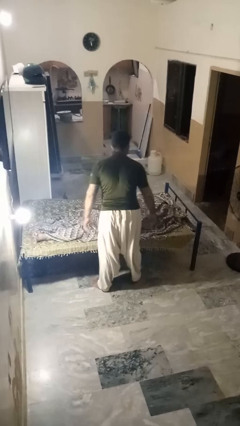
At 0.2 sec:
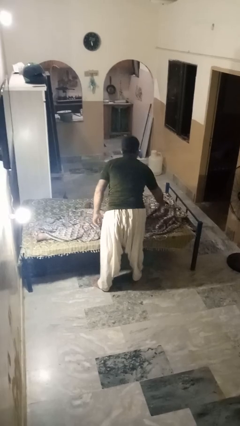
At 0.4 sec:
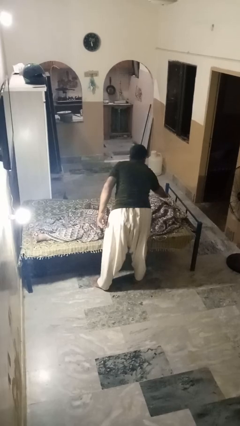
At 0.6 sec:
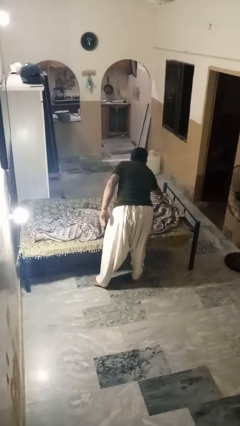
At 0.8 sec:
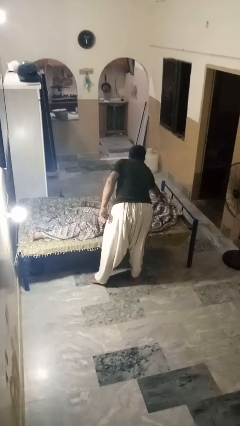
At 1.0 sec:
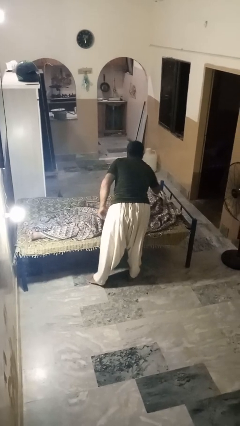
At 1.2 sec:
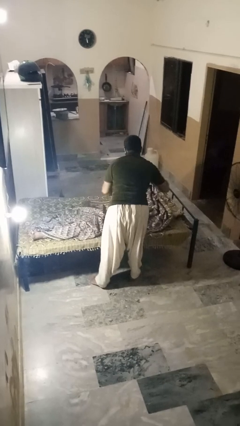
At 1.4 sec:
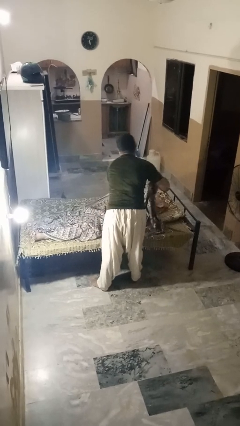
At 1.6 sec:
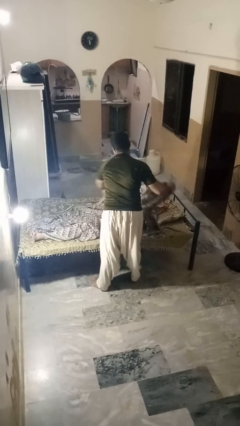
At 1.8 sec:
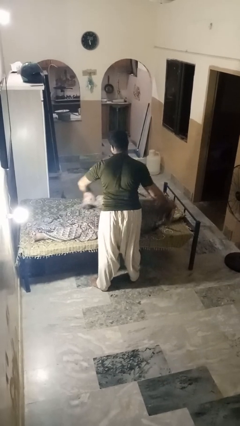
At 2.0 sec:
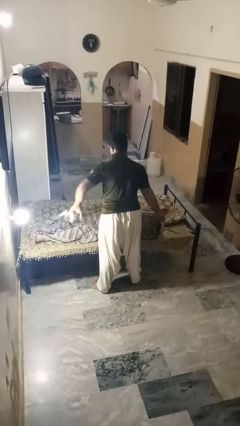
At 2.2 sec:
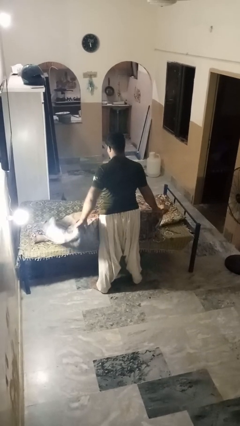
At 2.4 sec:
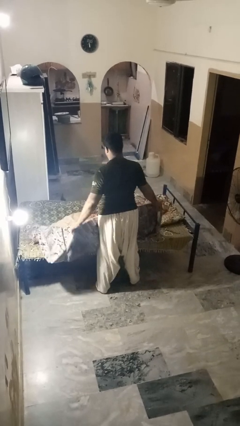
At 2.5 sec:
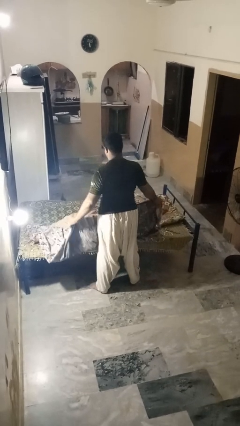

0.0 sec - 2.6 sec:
person uncovers friend with blanket

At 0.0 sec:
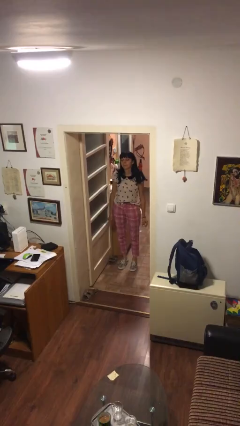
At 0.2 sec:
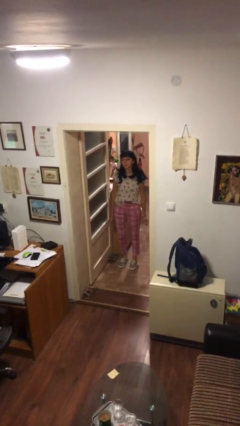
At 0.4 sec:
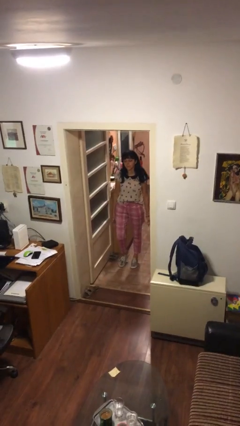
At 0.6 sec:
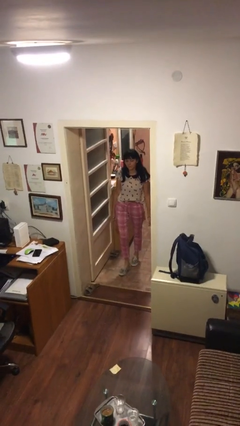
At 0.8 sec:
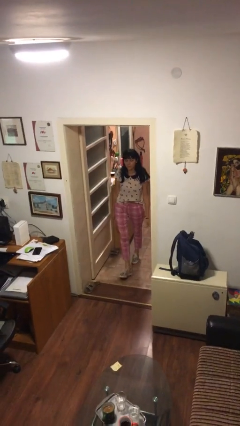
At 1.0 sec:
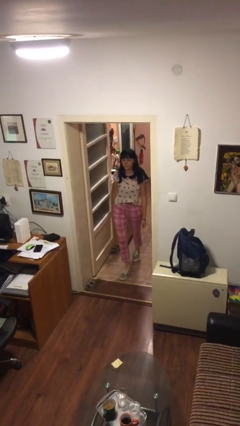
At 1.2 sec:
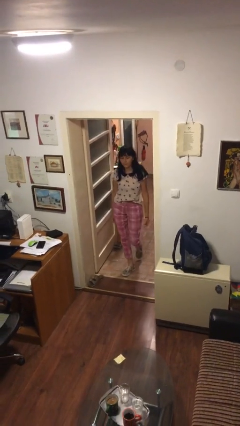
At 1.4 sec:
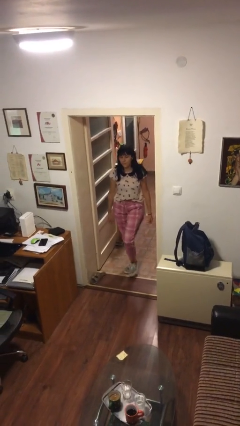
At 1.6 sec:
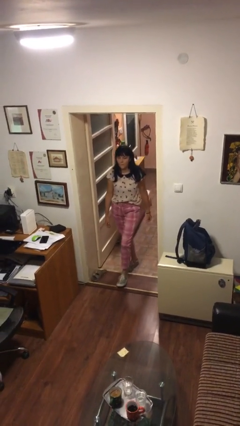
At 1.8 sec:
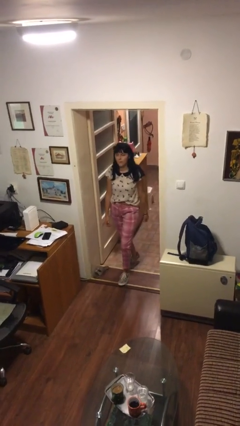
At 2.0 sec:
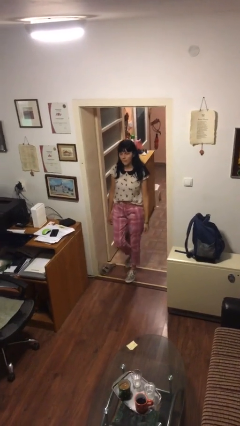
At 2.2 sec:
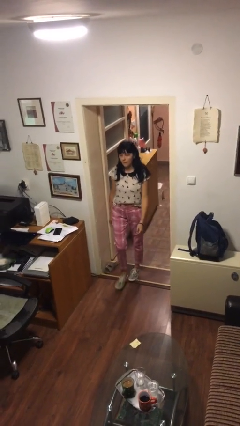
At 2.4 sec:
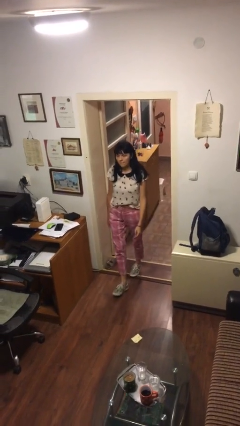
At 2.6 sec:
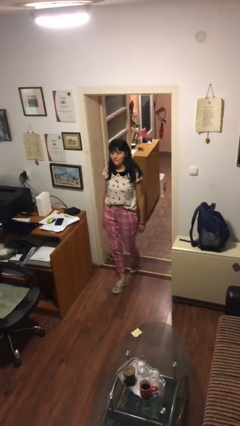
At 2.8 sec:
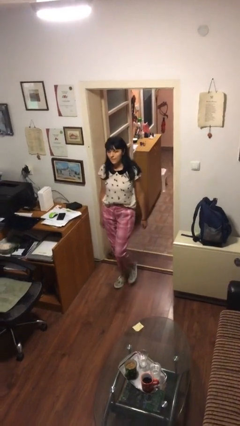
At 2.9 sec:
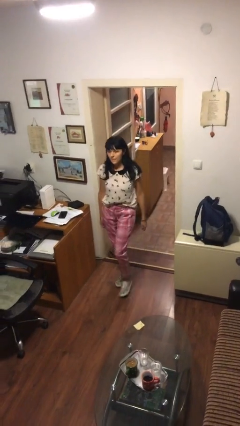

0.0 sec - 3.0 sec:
person enters scene through structure

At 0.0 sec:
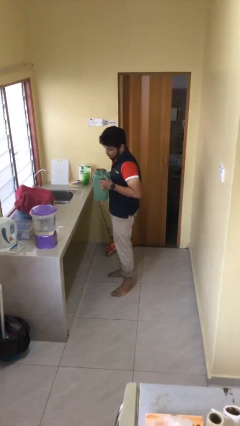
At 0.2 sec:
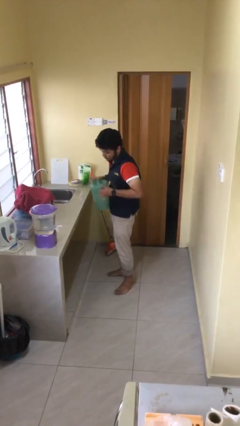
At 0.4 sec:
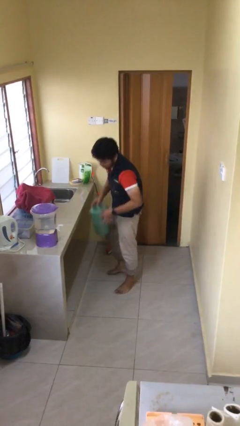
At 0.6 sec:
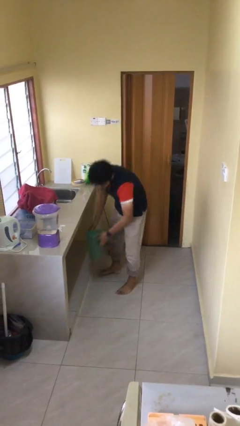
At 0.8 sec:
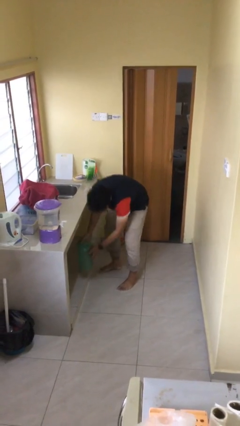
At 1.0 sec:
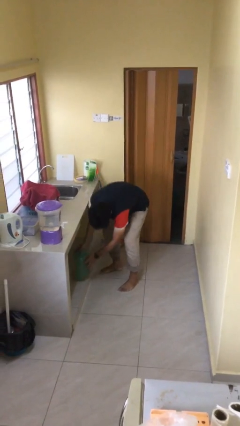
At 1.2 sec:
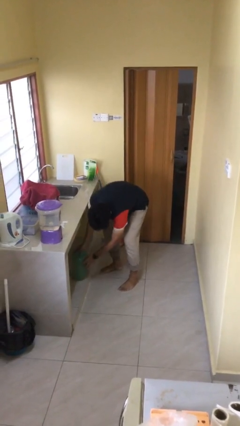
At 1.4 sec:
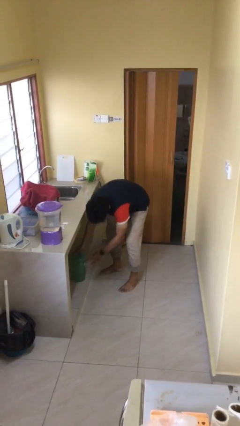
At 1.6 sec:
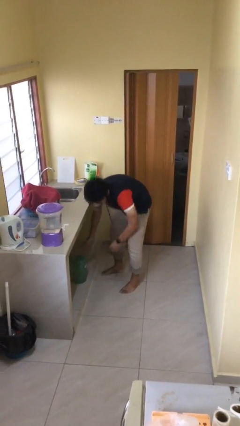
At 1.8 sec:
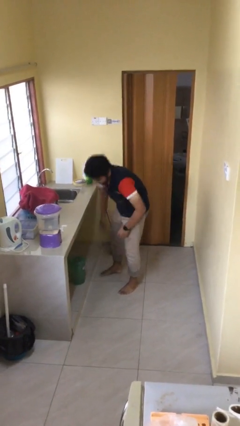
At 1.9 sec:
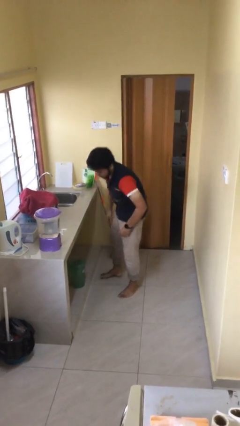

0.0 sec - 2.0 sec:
person puts down object into cabinet

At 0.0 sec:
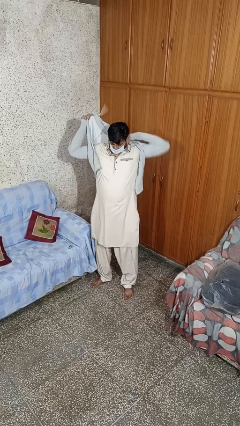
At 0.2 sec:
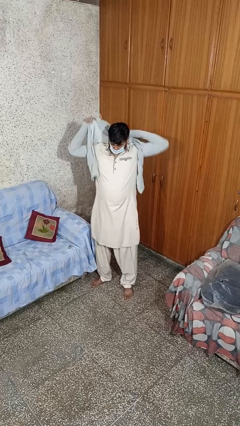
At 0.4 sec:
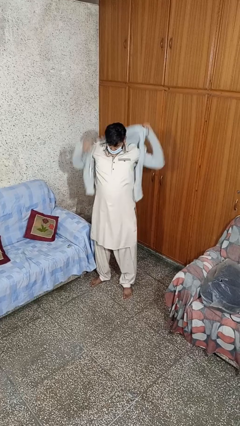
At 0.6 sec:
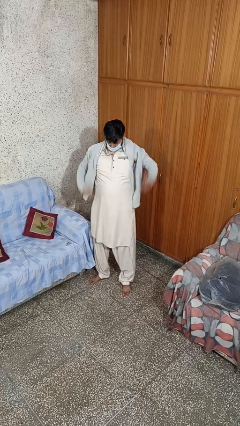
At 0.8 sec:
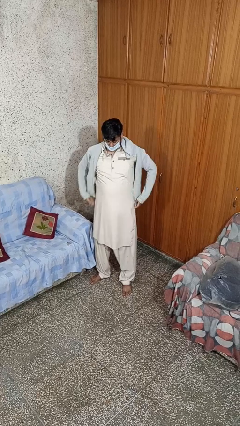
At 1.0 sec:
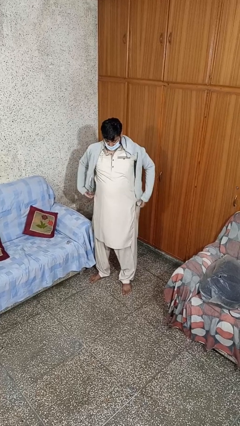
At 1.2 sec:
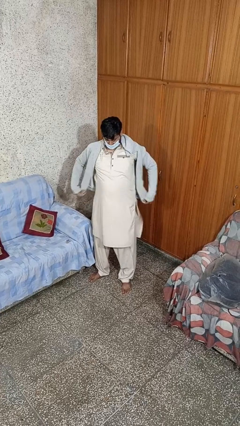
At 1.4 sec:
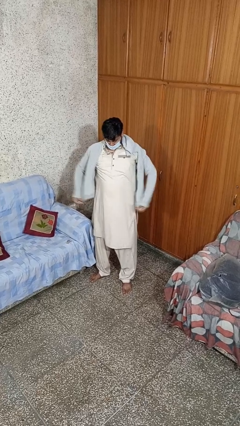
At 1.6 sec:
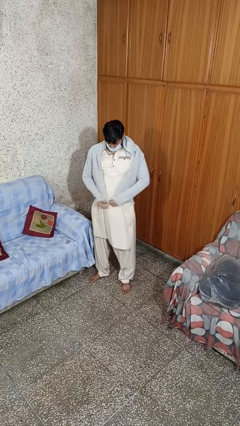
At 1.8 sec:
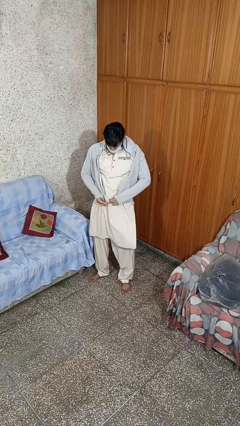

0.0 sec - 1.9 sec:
person zips up jacket

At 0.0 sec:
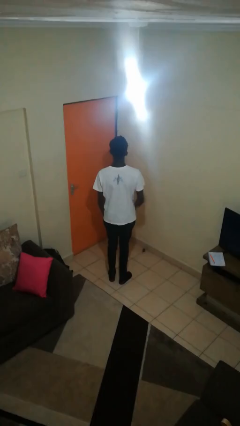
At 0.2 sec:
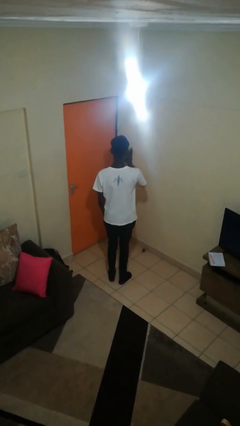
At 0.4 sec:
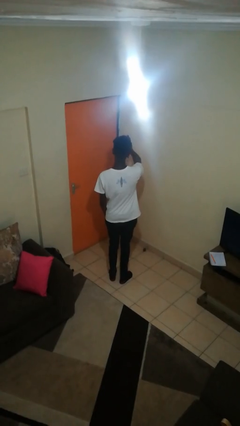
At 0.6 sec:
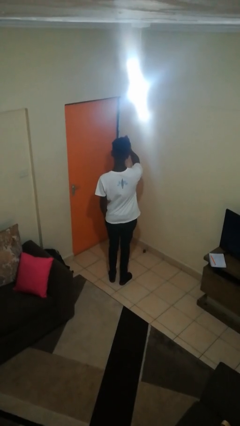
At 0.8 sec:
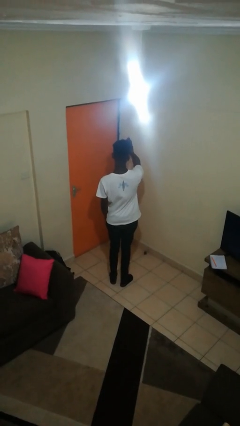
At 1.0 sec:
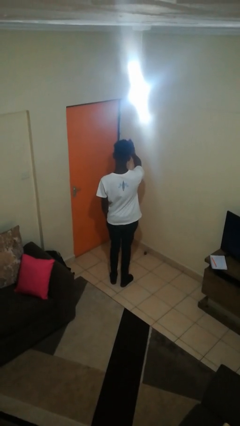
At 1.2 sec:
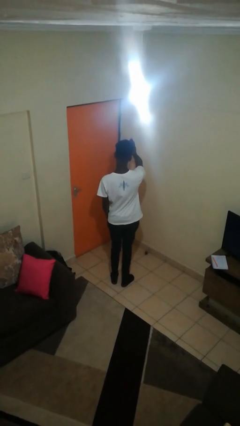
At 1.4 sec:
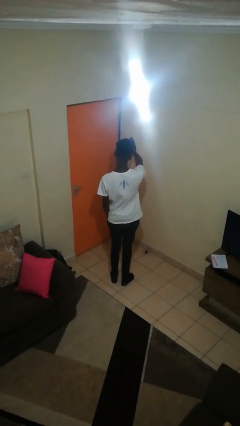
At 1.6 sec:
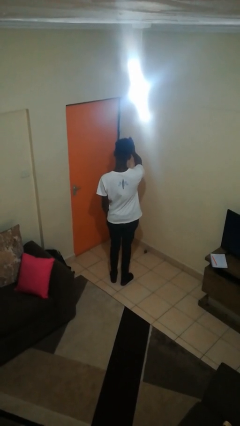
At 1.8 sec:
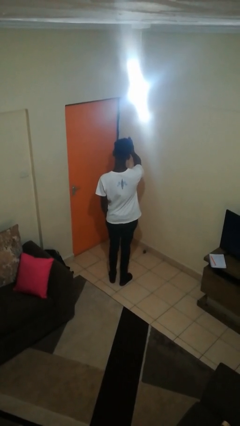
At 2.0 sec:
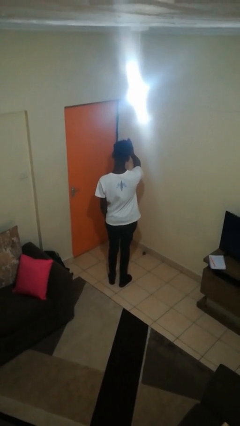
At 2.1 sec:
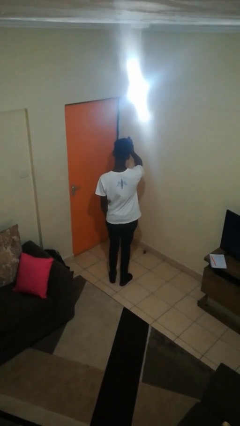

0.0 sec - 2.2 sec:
person gestures stop

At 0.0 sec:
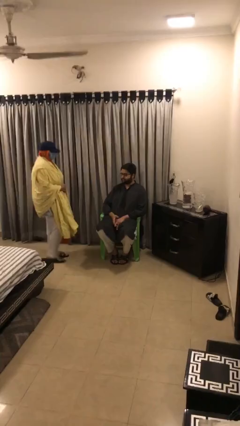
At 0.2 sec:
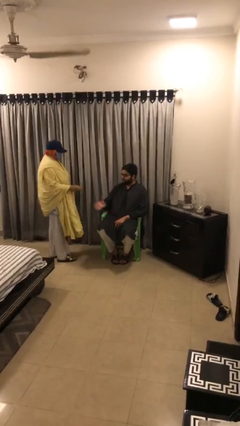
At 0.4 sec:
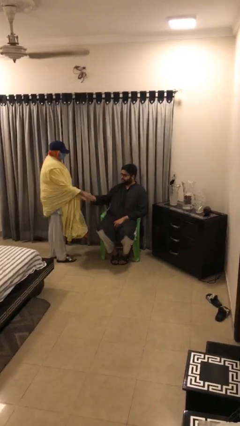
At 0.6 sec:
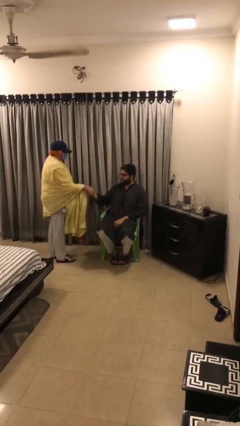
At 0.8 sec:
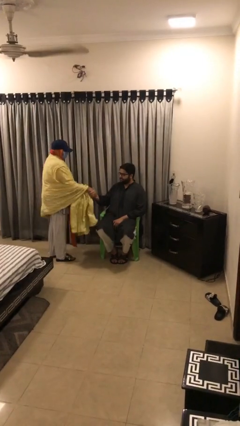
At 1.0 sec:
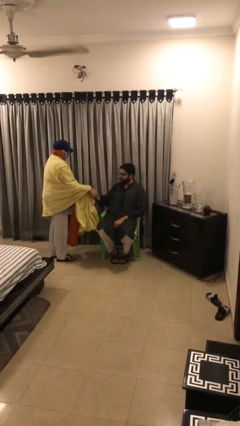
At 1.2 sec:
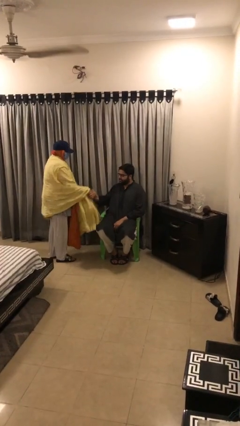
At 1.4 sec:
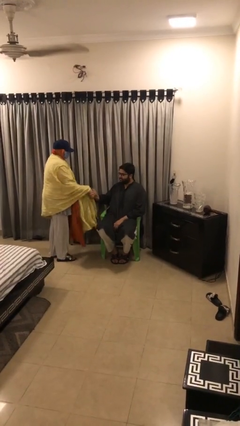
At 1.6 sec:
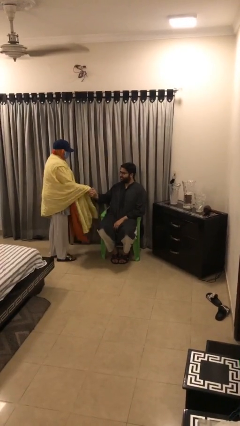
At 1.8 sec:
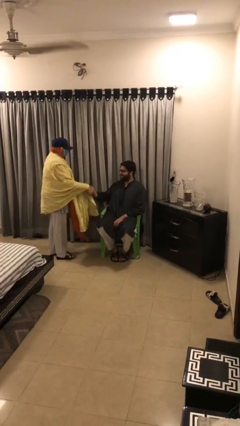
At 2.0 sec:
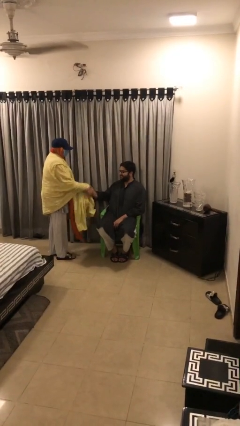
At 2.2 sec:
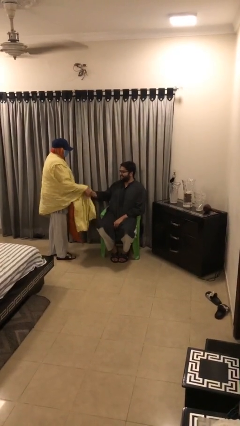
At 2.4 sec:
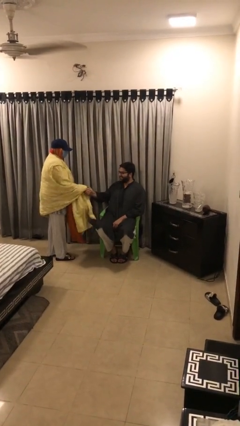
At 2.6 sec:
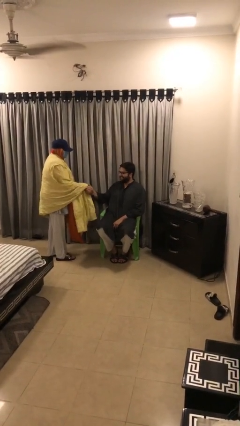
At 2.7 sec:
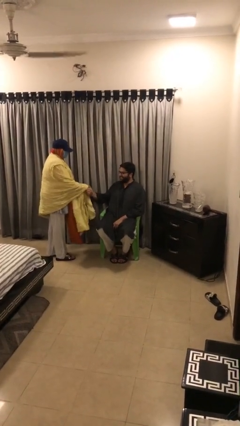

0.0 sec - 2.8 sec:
person shakes hand

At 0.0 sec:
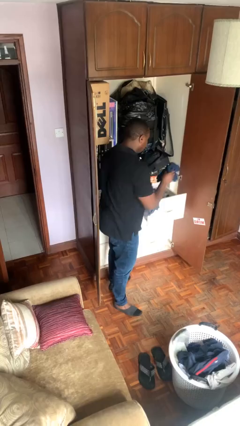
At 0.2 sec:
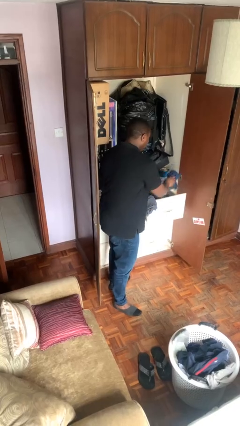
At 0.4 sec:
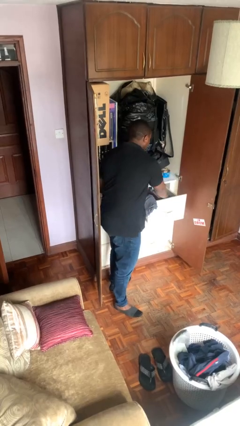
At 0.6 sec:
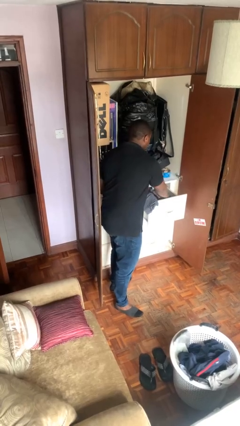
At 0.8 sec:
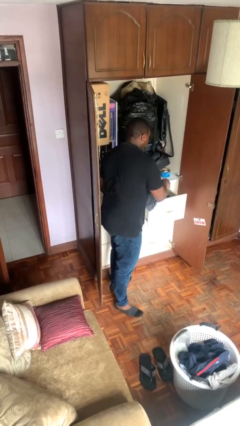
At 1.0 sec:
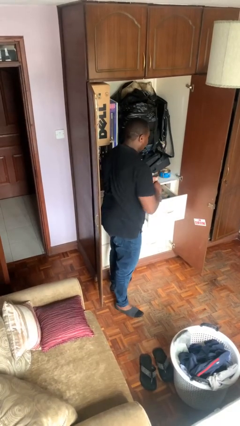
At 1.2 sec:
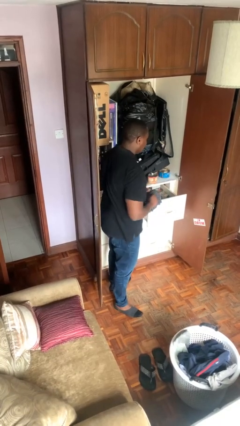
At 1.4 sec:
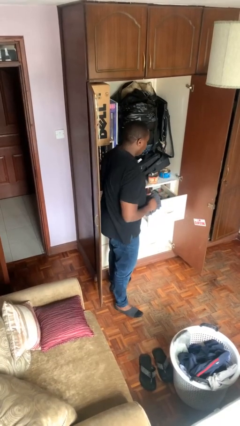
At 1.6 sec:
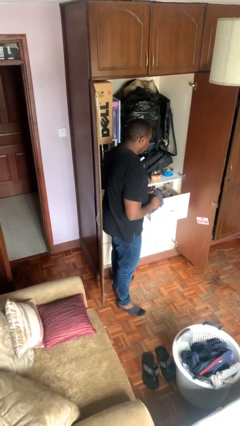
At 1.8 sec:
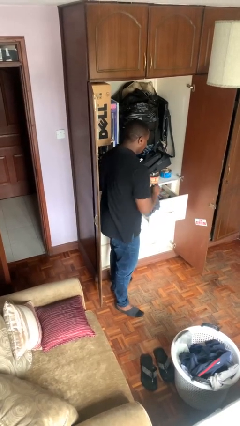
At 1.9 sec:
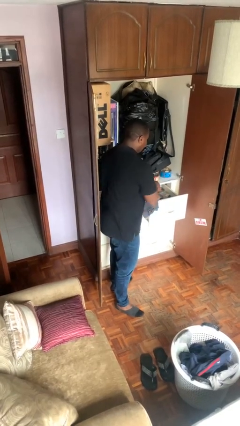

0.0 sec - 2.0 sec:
person puts clothes into dresser

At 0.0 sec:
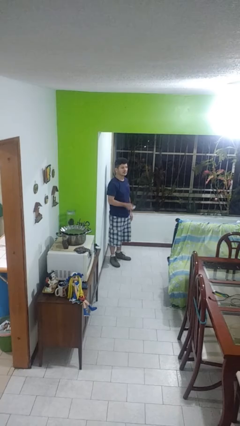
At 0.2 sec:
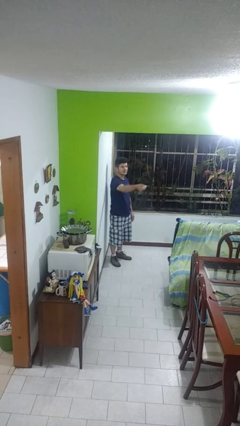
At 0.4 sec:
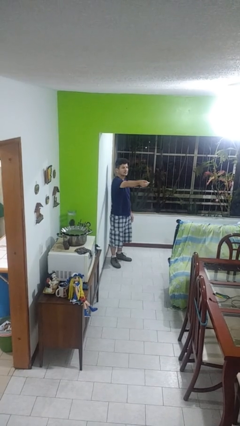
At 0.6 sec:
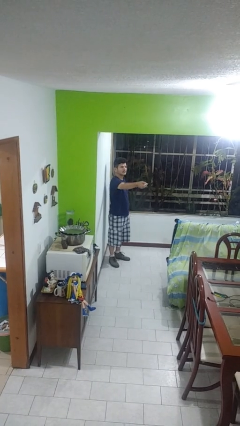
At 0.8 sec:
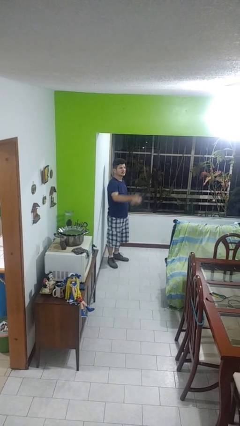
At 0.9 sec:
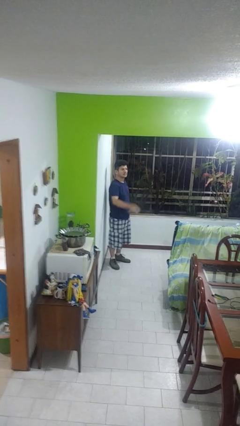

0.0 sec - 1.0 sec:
person uses television remote
